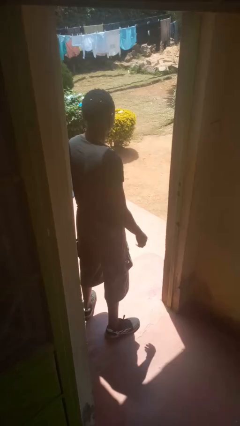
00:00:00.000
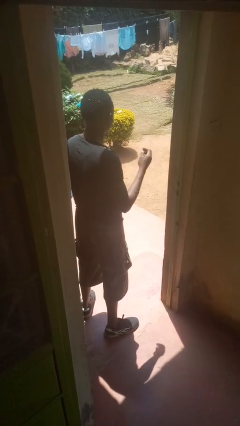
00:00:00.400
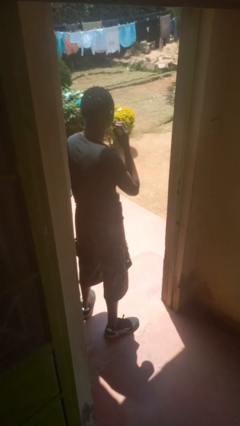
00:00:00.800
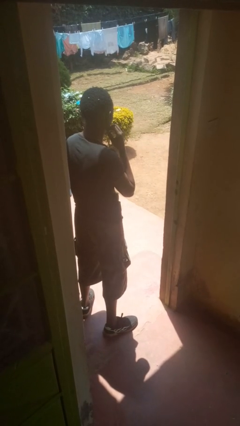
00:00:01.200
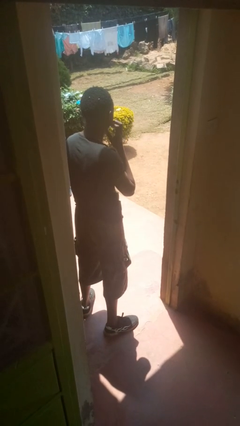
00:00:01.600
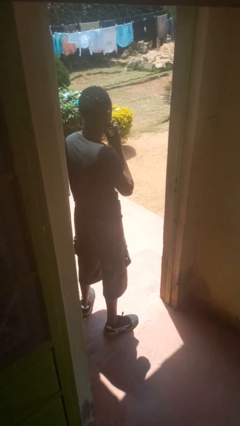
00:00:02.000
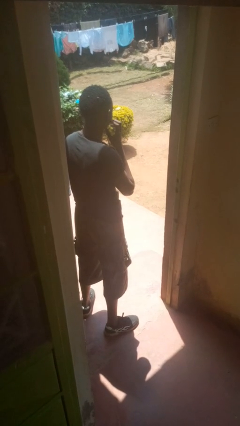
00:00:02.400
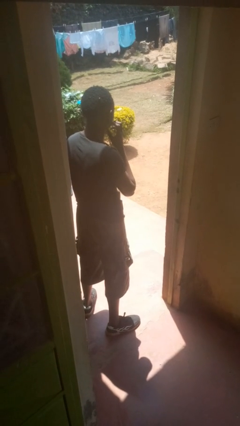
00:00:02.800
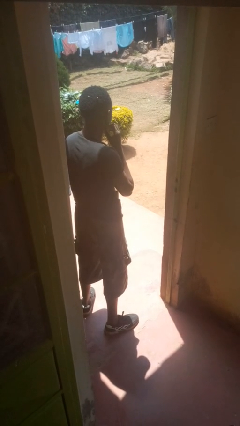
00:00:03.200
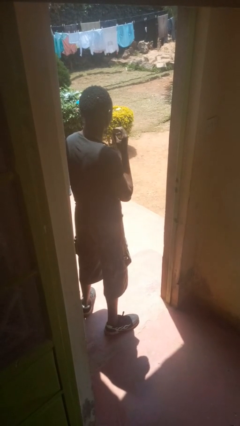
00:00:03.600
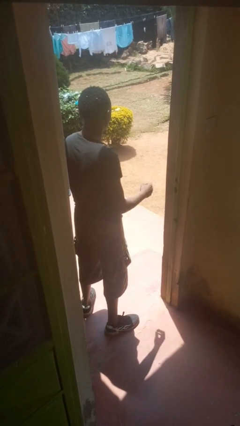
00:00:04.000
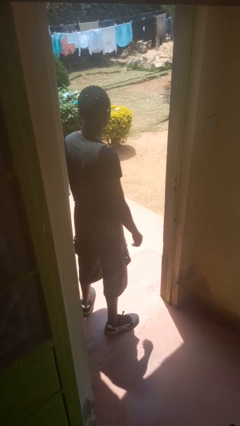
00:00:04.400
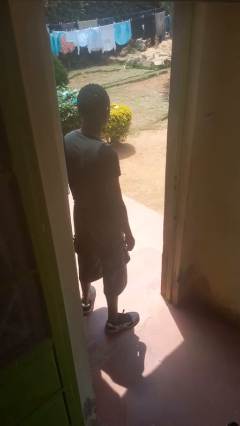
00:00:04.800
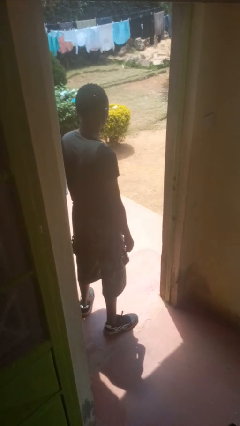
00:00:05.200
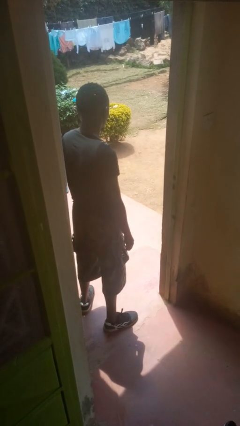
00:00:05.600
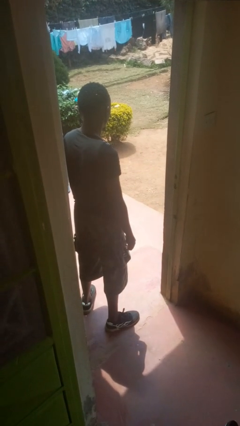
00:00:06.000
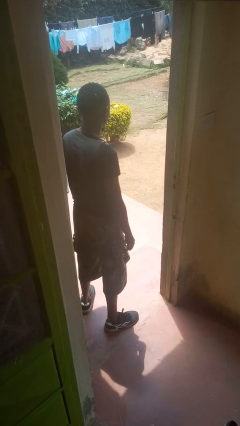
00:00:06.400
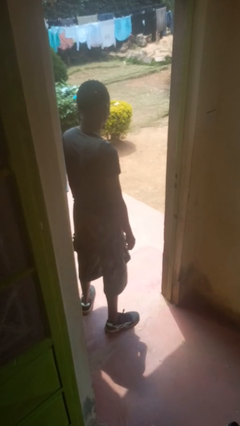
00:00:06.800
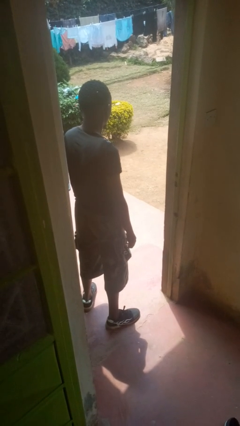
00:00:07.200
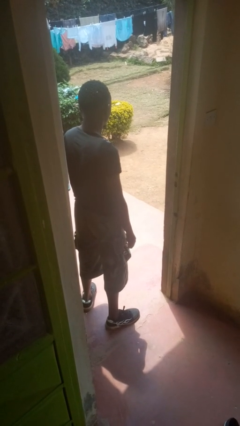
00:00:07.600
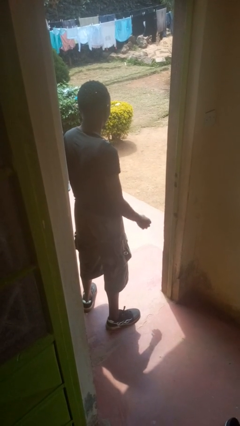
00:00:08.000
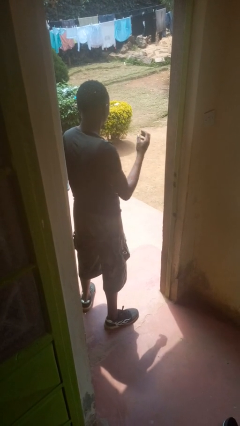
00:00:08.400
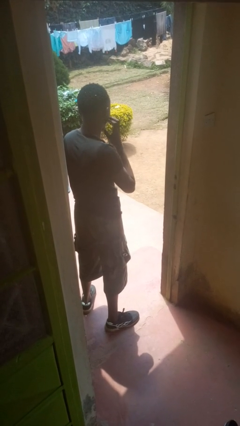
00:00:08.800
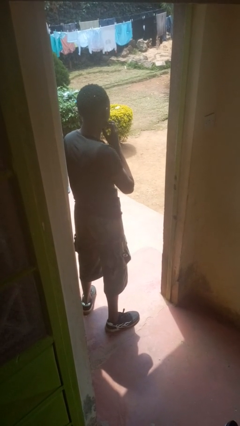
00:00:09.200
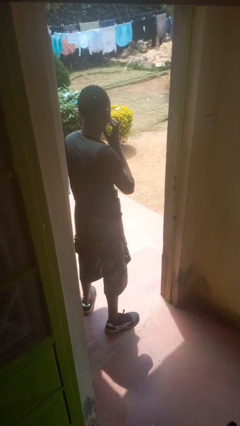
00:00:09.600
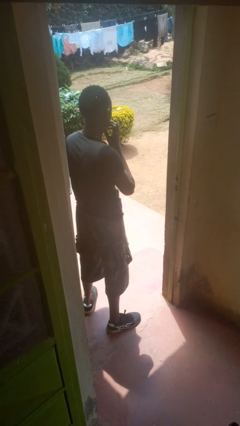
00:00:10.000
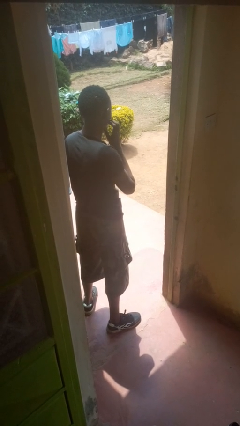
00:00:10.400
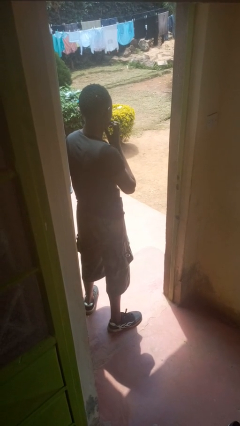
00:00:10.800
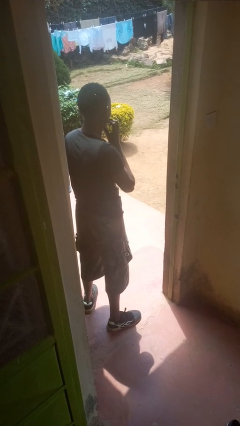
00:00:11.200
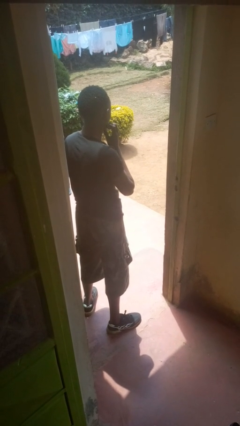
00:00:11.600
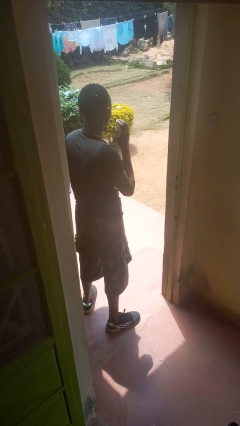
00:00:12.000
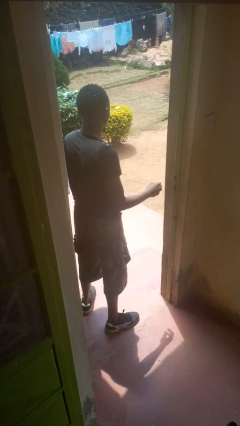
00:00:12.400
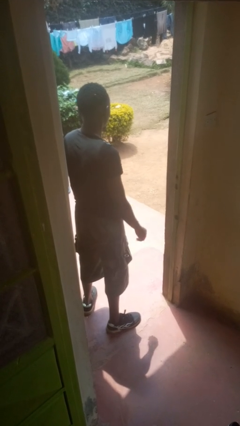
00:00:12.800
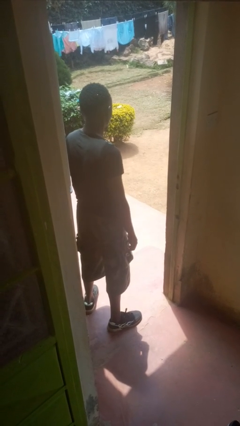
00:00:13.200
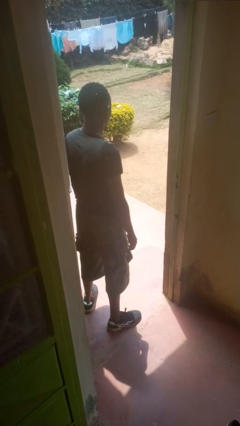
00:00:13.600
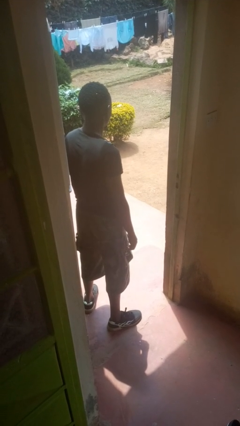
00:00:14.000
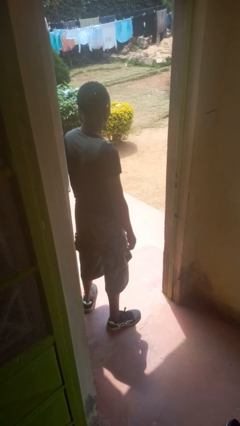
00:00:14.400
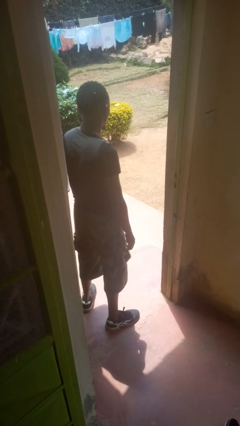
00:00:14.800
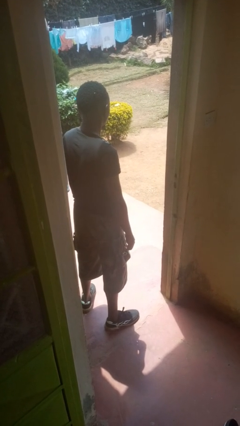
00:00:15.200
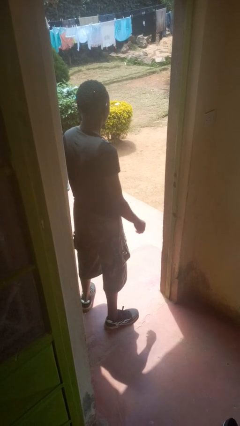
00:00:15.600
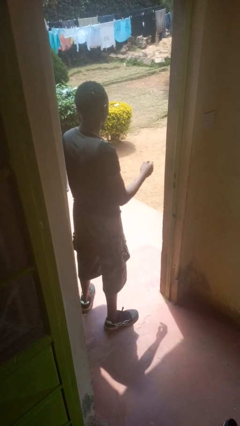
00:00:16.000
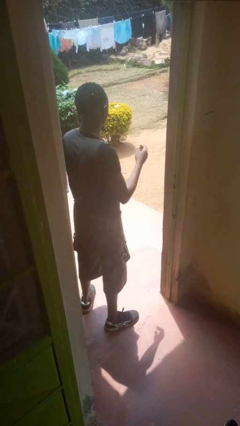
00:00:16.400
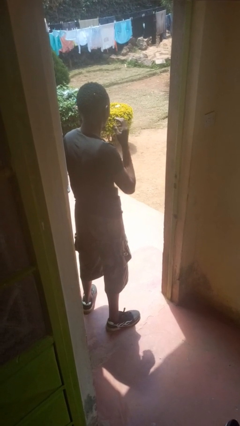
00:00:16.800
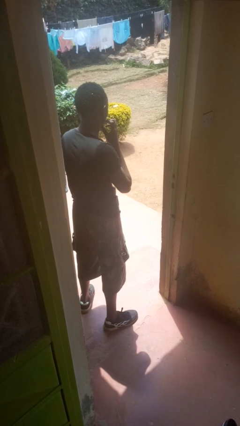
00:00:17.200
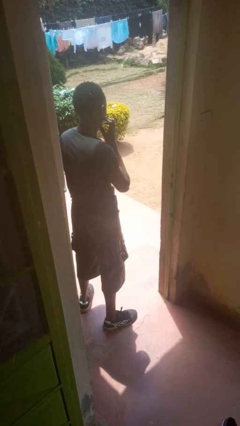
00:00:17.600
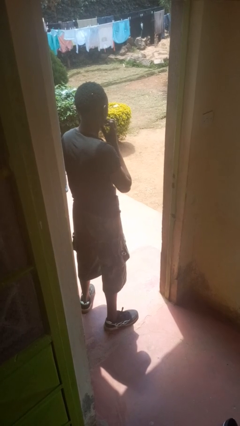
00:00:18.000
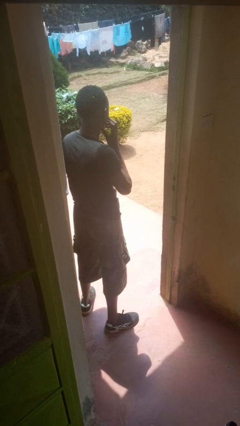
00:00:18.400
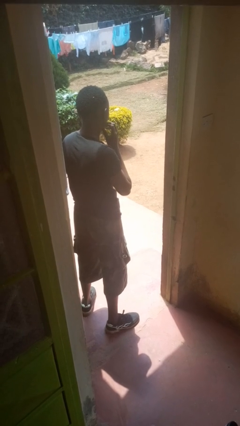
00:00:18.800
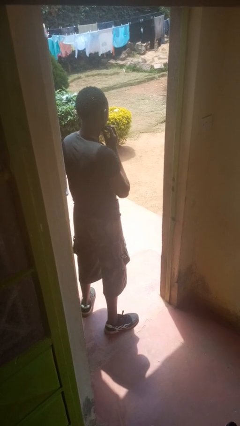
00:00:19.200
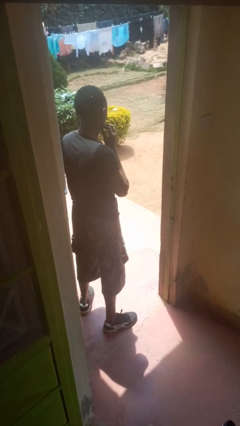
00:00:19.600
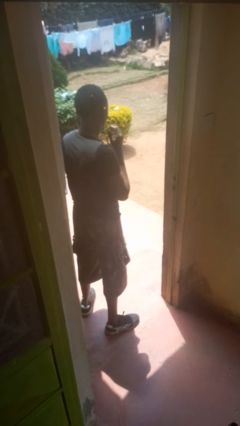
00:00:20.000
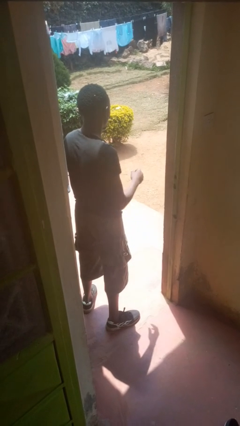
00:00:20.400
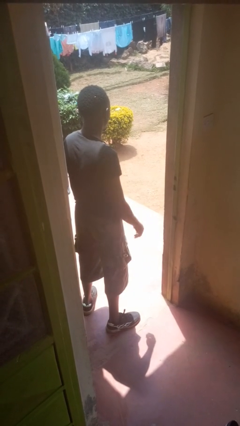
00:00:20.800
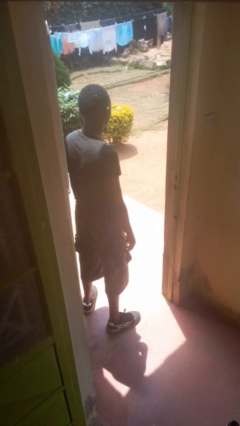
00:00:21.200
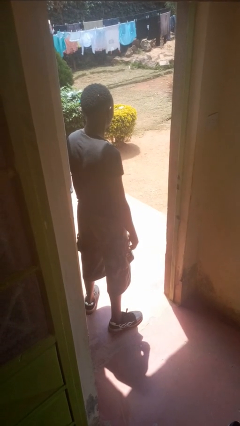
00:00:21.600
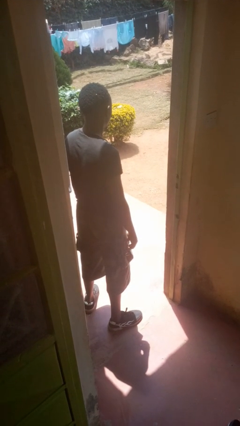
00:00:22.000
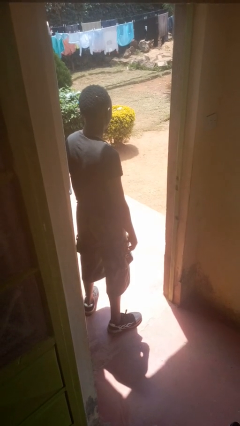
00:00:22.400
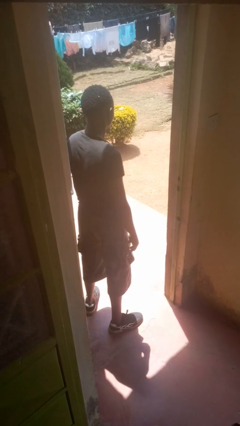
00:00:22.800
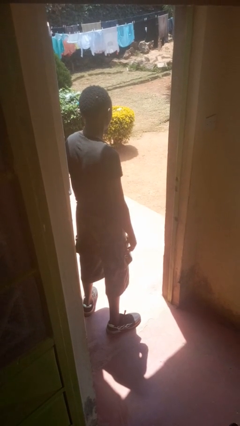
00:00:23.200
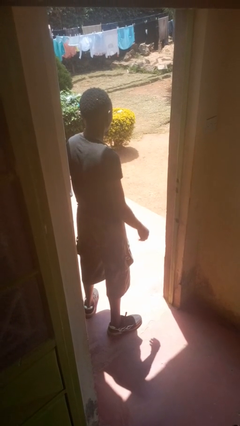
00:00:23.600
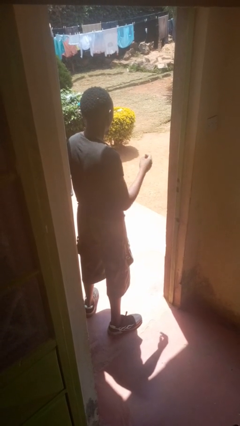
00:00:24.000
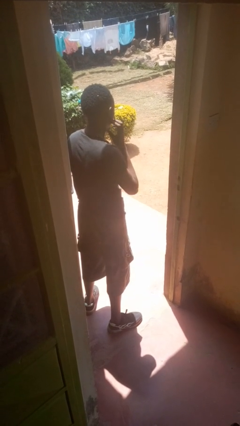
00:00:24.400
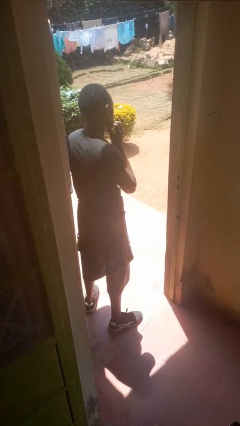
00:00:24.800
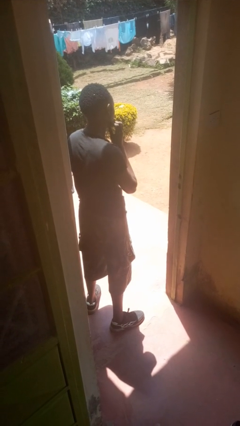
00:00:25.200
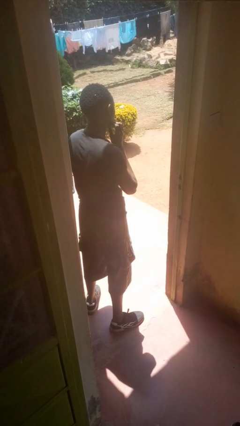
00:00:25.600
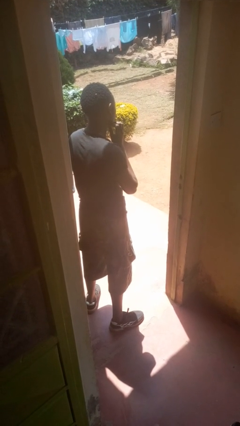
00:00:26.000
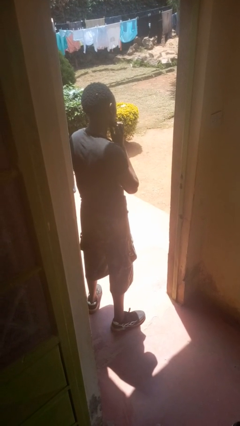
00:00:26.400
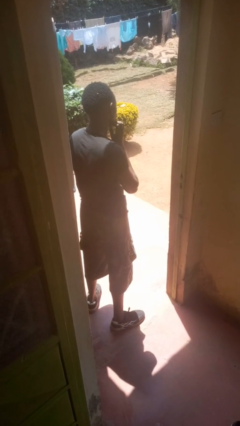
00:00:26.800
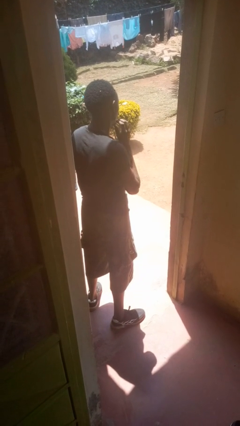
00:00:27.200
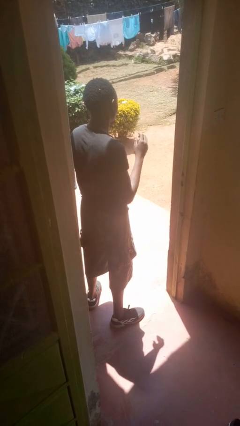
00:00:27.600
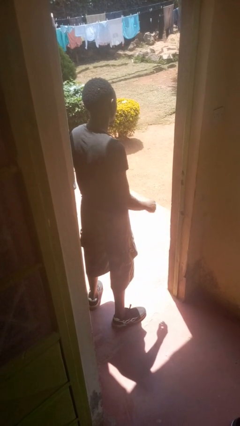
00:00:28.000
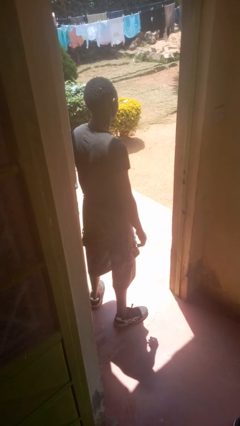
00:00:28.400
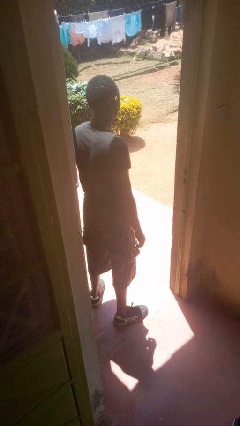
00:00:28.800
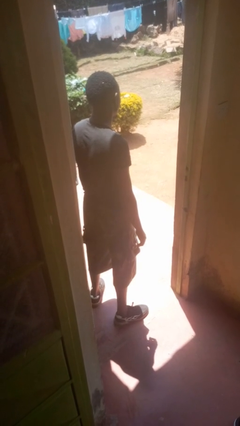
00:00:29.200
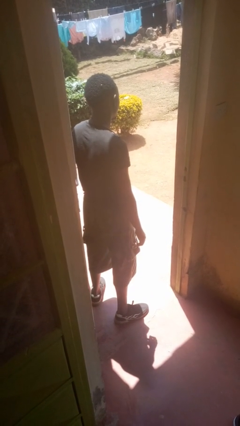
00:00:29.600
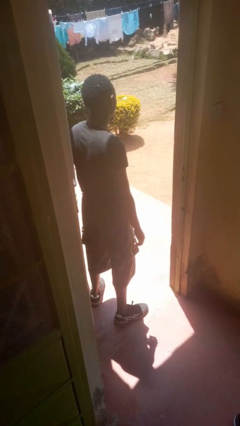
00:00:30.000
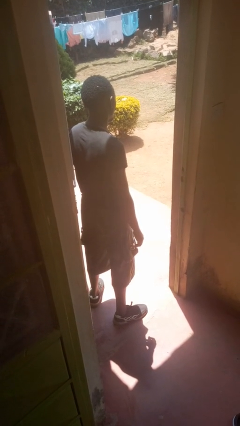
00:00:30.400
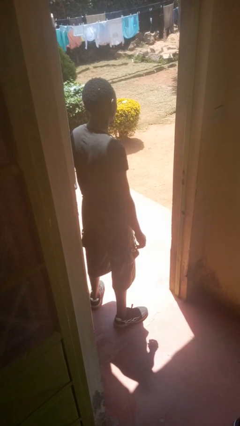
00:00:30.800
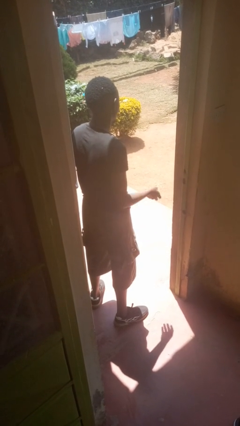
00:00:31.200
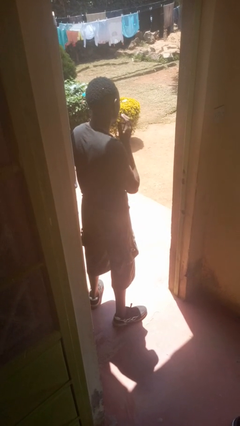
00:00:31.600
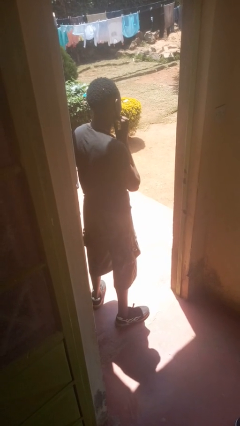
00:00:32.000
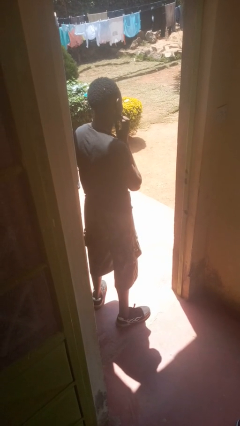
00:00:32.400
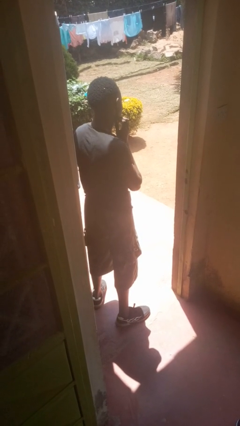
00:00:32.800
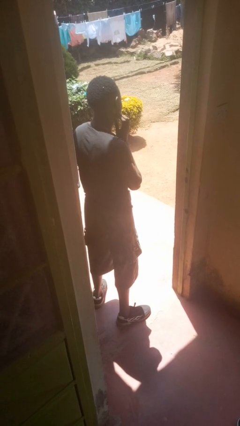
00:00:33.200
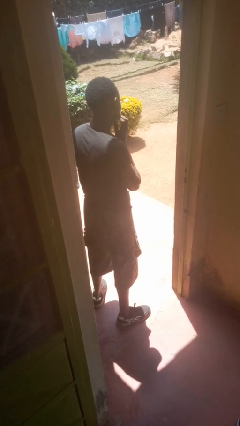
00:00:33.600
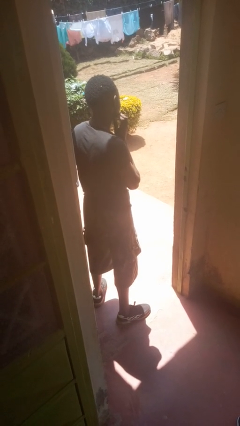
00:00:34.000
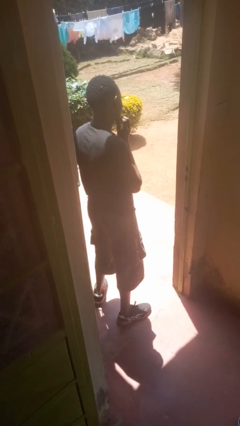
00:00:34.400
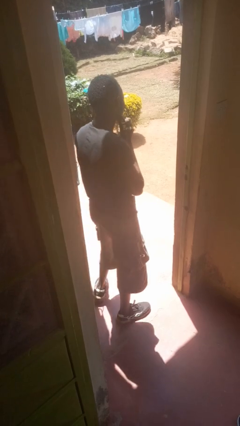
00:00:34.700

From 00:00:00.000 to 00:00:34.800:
person scratches face

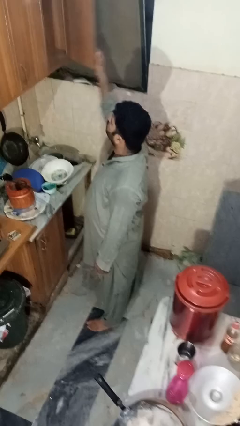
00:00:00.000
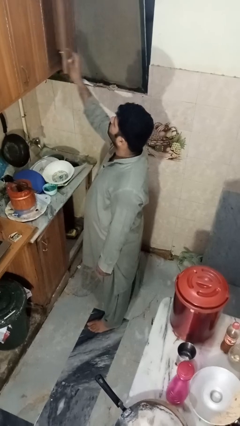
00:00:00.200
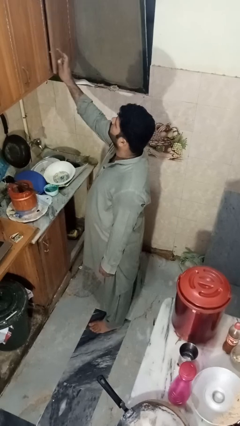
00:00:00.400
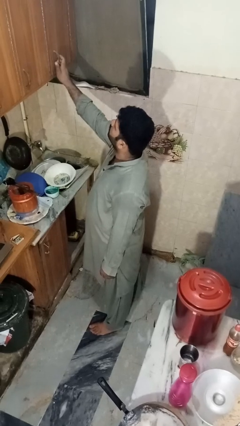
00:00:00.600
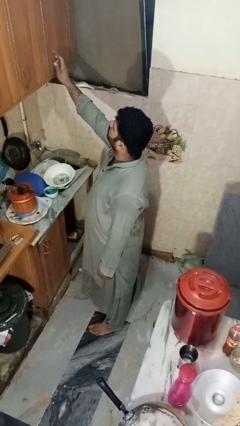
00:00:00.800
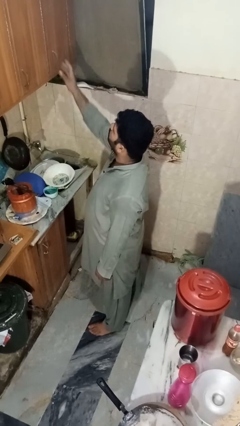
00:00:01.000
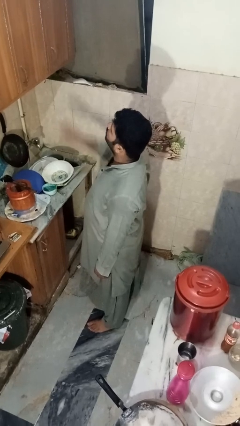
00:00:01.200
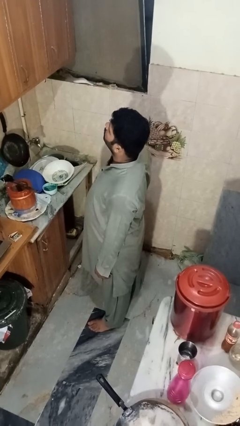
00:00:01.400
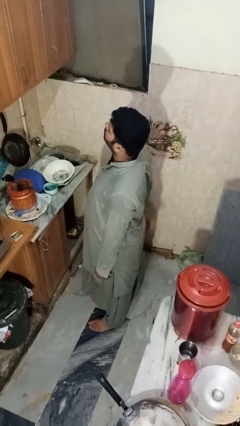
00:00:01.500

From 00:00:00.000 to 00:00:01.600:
person closes cabinet
